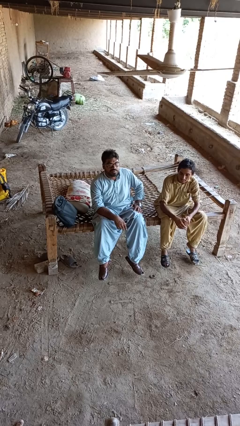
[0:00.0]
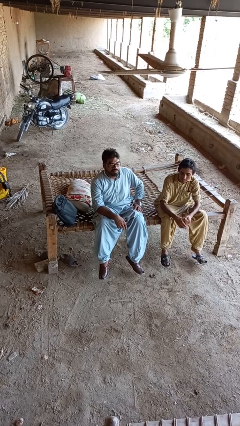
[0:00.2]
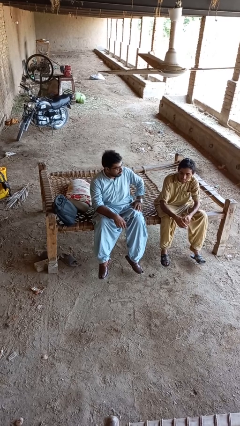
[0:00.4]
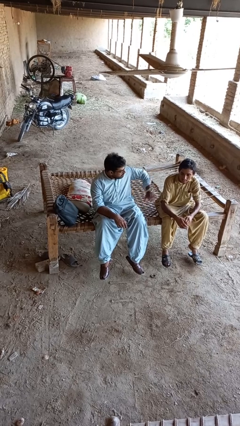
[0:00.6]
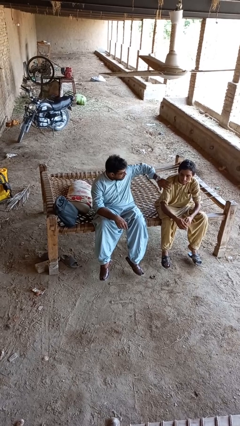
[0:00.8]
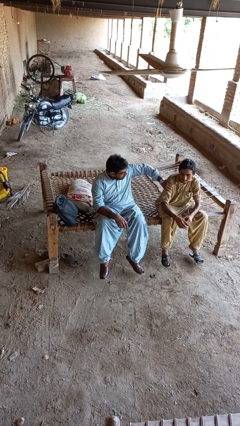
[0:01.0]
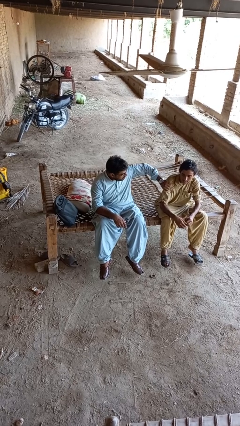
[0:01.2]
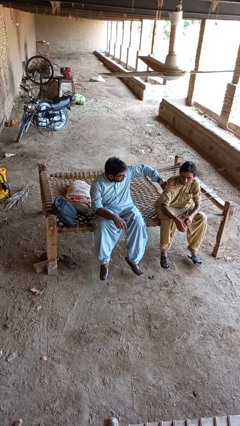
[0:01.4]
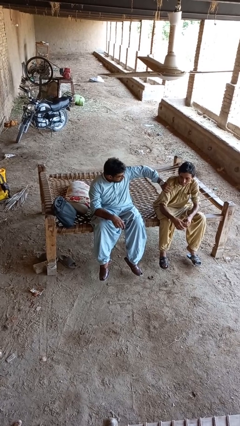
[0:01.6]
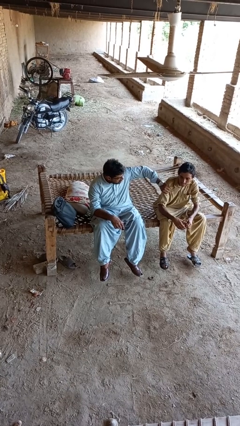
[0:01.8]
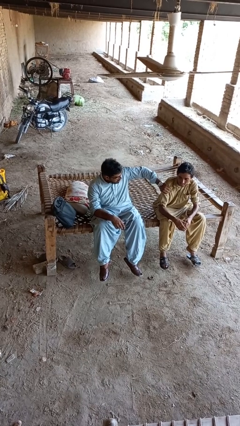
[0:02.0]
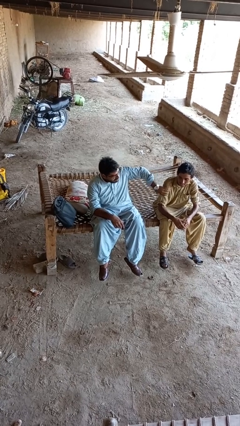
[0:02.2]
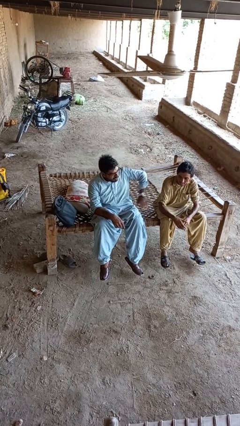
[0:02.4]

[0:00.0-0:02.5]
person grabs person by bicep

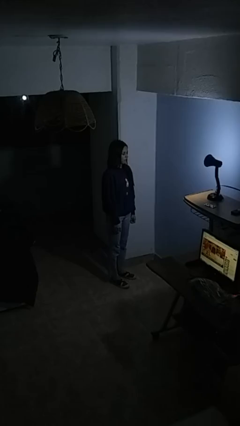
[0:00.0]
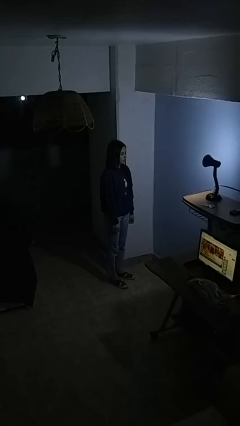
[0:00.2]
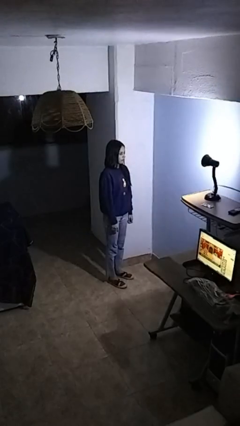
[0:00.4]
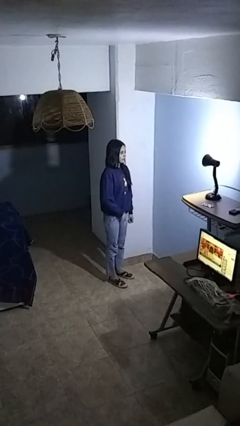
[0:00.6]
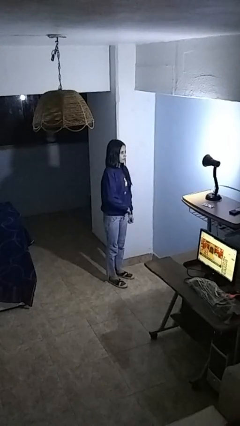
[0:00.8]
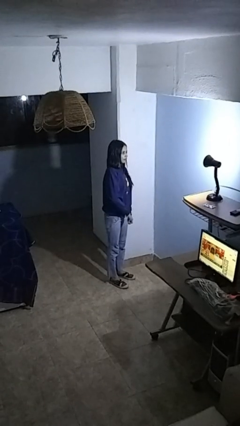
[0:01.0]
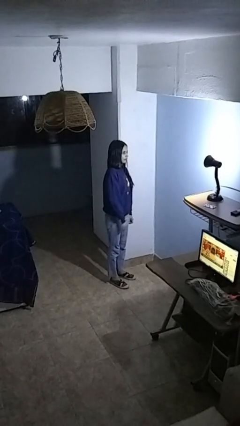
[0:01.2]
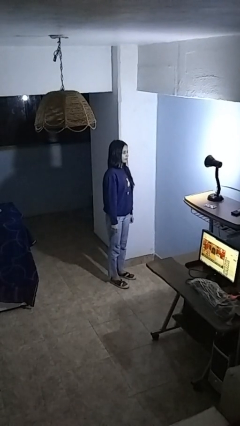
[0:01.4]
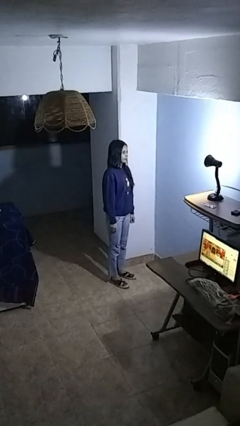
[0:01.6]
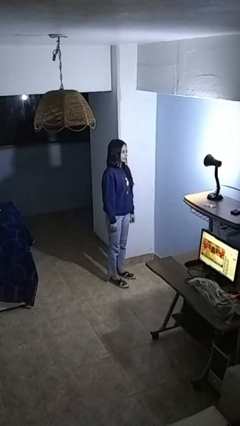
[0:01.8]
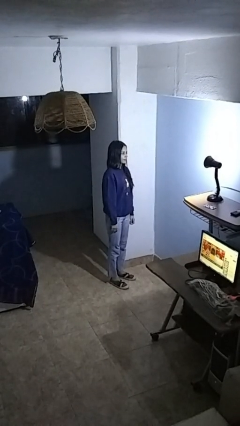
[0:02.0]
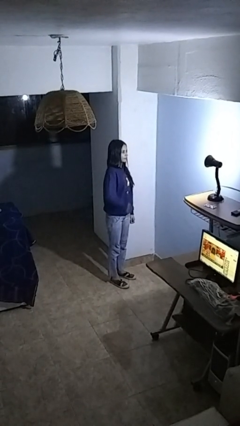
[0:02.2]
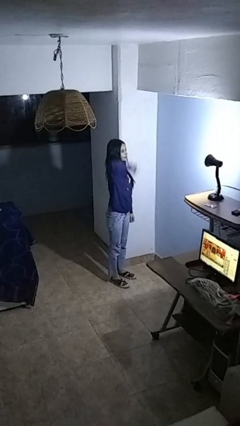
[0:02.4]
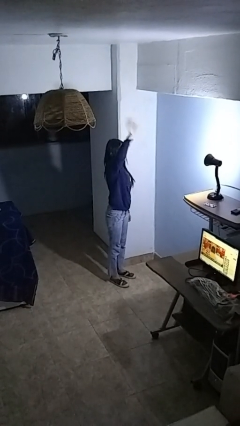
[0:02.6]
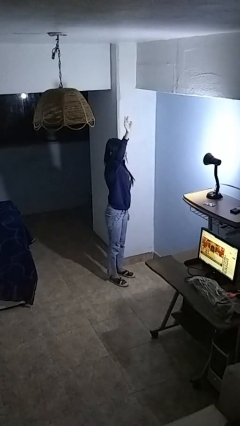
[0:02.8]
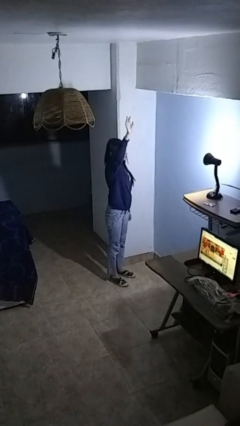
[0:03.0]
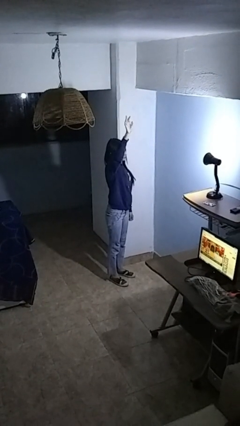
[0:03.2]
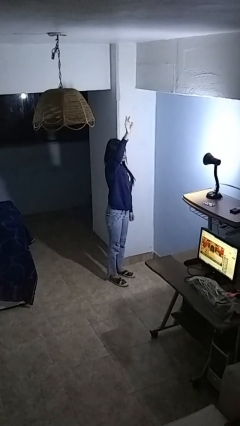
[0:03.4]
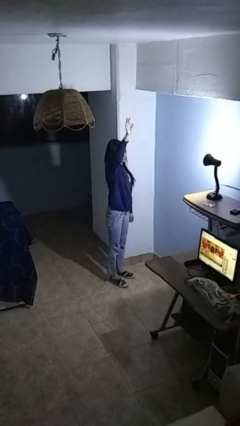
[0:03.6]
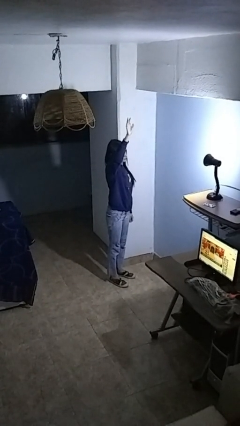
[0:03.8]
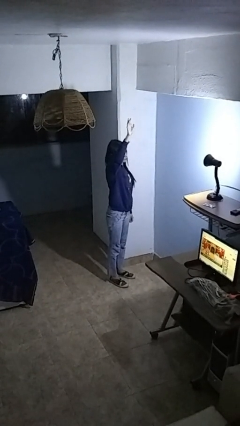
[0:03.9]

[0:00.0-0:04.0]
person gestures swipe up

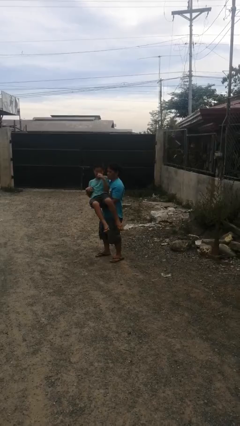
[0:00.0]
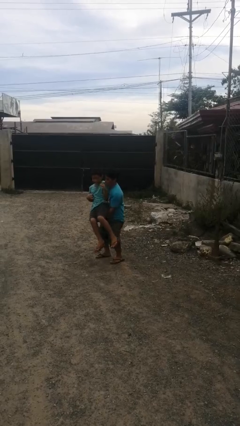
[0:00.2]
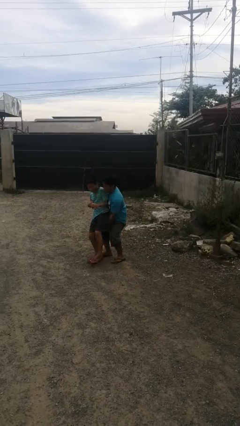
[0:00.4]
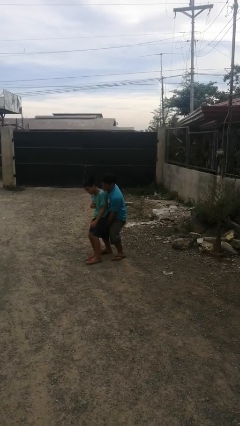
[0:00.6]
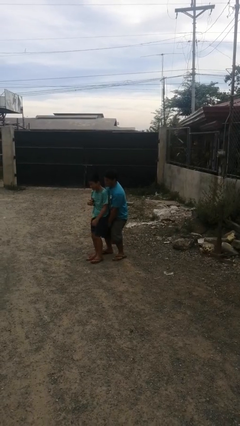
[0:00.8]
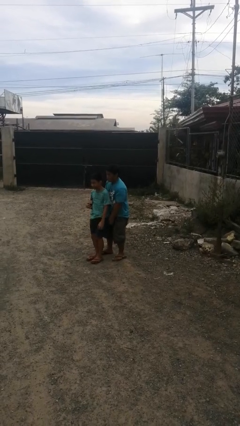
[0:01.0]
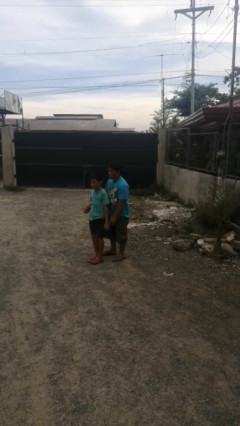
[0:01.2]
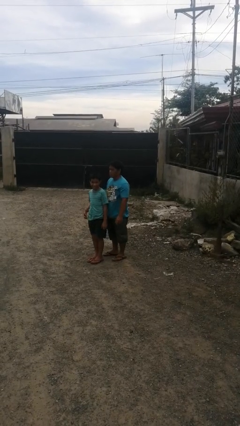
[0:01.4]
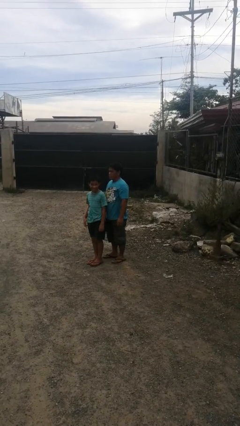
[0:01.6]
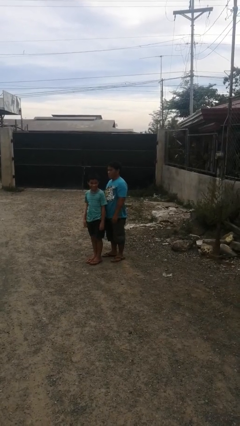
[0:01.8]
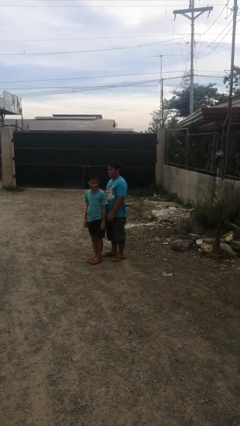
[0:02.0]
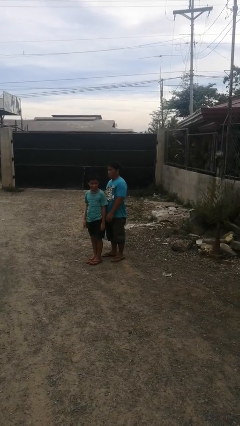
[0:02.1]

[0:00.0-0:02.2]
person puts down person

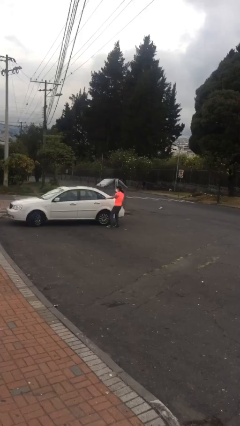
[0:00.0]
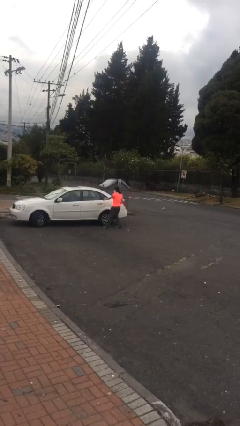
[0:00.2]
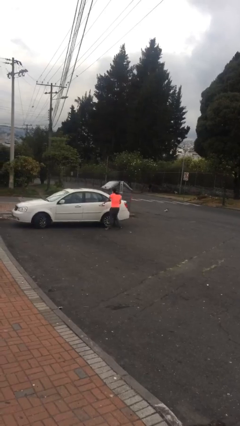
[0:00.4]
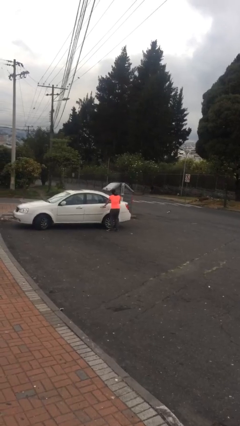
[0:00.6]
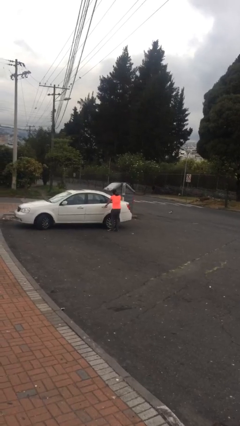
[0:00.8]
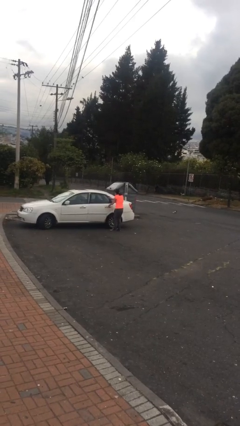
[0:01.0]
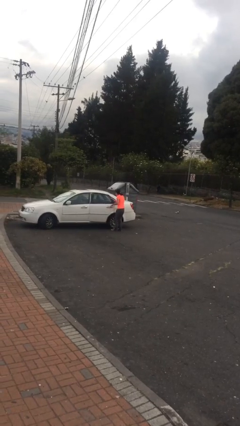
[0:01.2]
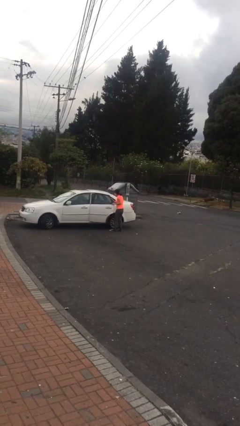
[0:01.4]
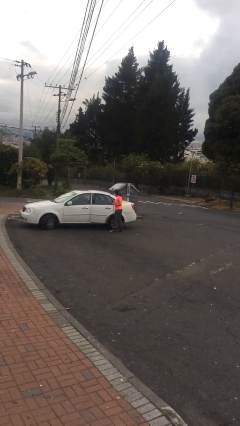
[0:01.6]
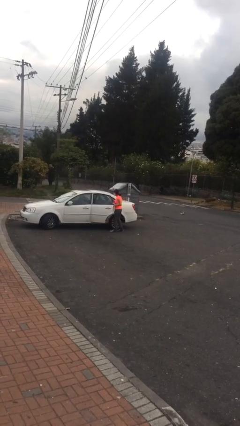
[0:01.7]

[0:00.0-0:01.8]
person opens car door

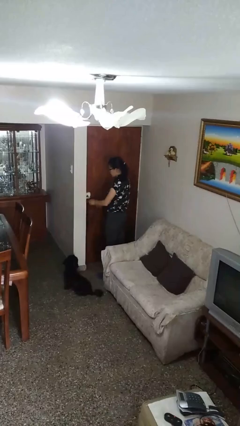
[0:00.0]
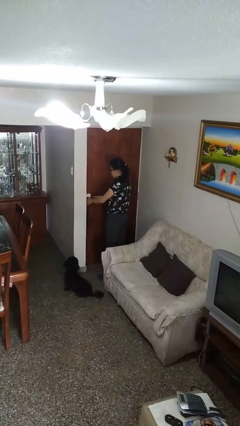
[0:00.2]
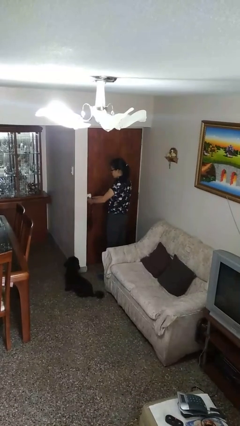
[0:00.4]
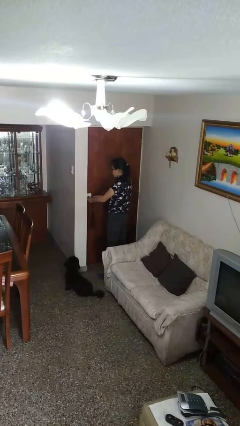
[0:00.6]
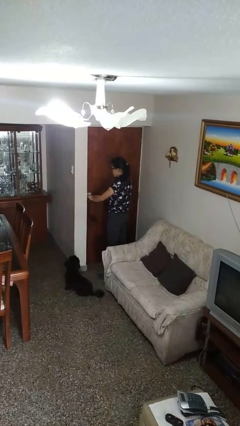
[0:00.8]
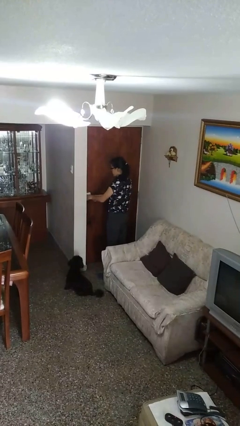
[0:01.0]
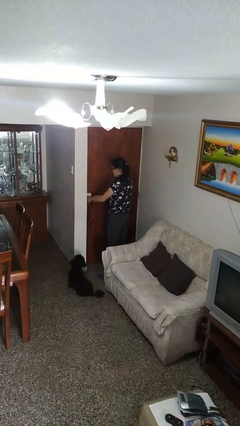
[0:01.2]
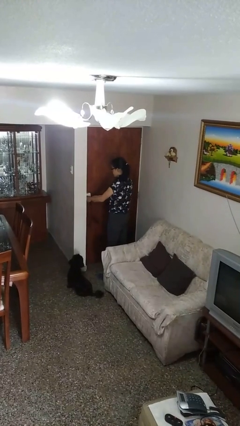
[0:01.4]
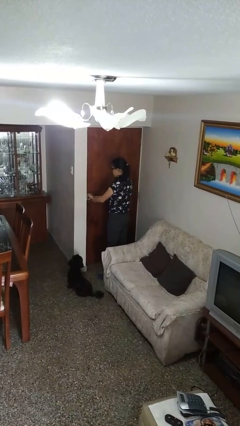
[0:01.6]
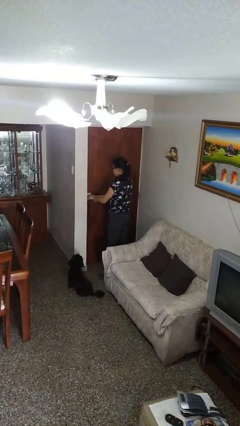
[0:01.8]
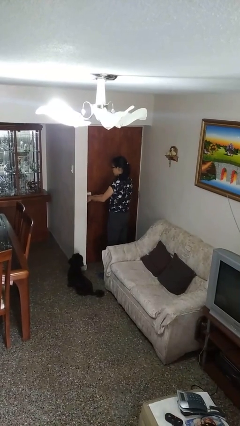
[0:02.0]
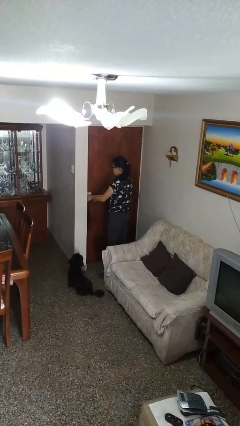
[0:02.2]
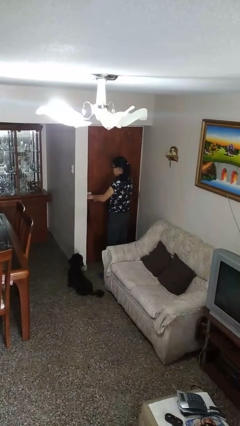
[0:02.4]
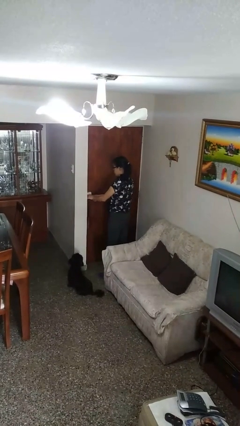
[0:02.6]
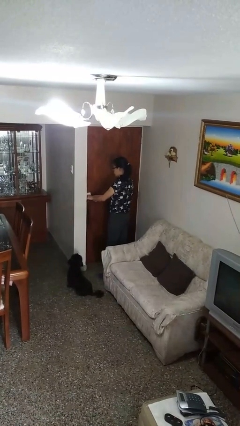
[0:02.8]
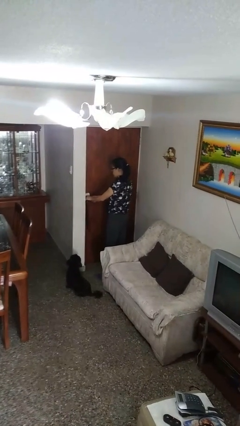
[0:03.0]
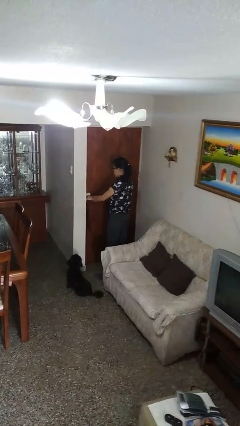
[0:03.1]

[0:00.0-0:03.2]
person unlocks door with keys

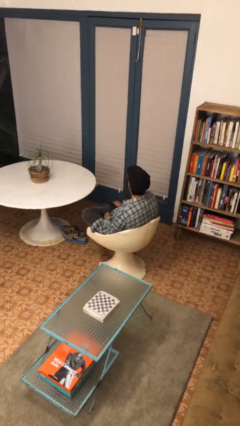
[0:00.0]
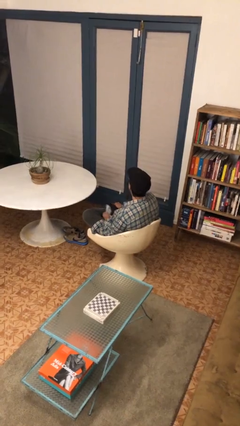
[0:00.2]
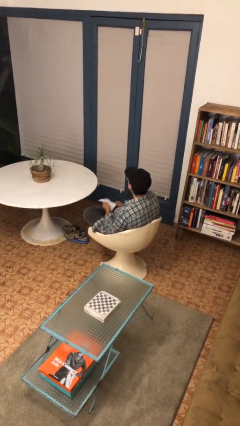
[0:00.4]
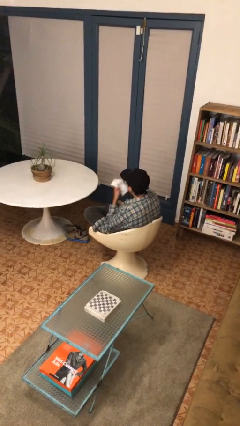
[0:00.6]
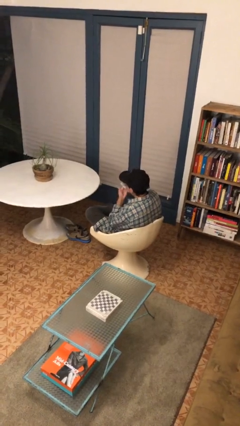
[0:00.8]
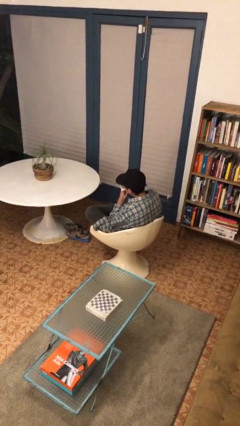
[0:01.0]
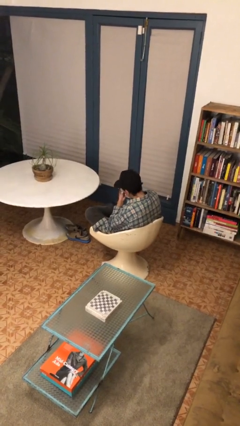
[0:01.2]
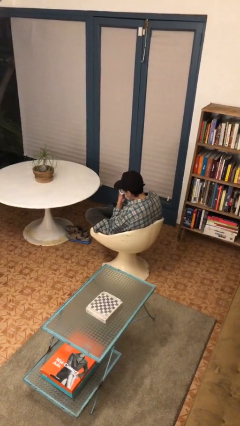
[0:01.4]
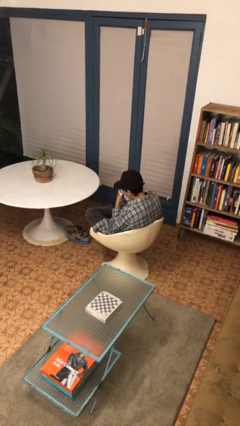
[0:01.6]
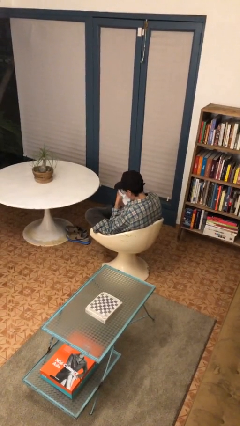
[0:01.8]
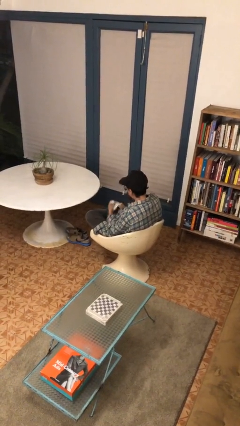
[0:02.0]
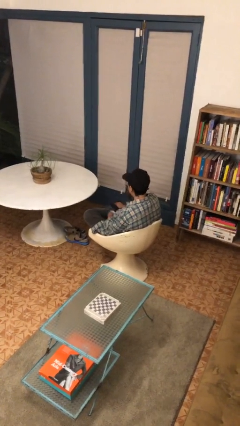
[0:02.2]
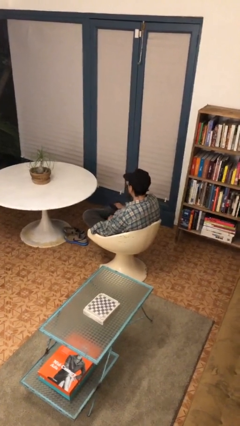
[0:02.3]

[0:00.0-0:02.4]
person blows nose

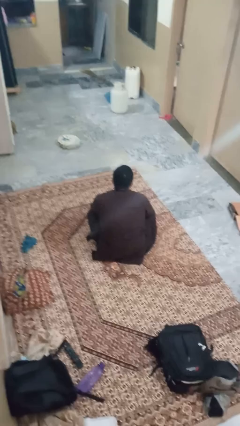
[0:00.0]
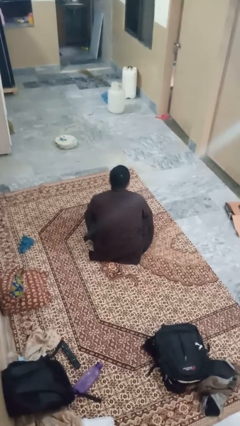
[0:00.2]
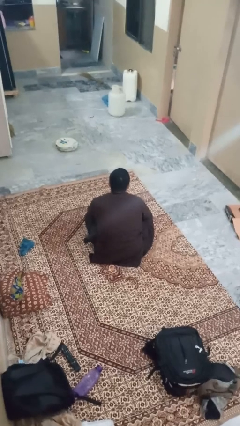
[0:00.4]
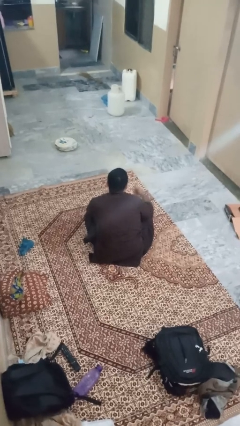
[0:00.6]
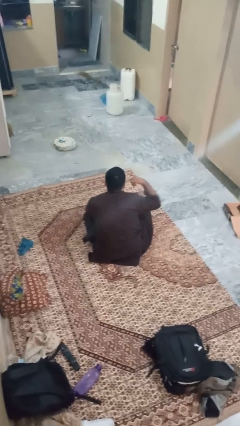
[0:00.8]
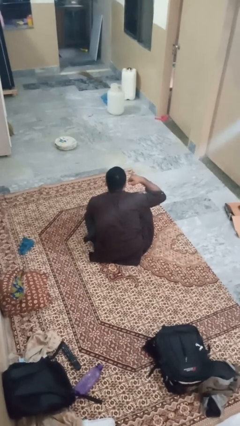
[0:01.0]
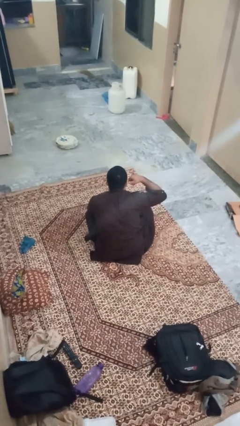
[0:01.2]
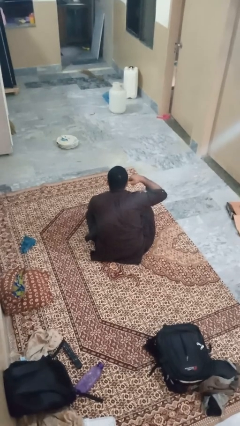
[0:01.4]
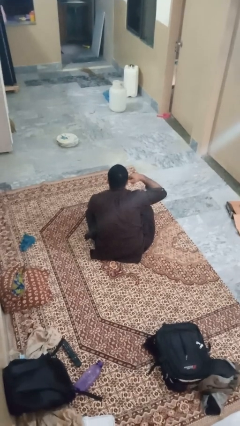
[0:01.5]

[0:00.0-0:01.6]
person gestures call me
